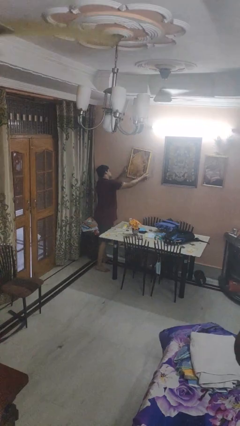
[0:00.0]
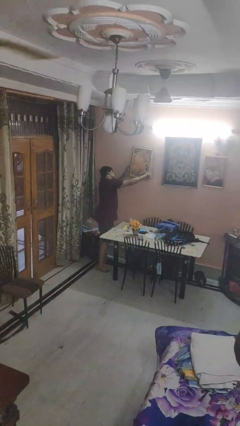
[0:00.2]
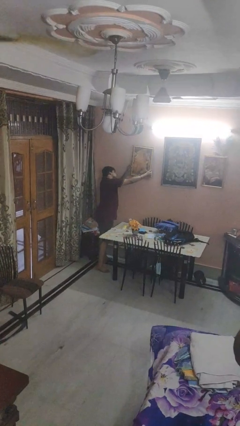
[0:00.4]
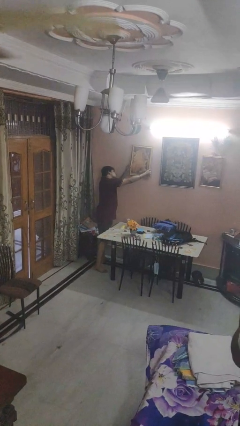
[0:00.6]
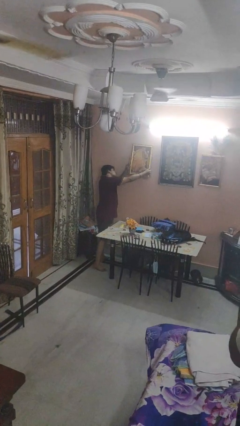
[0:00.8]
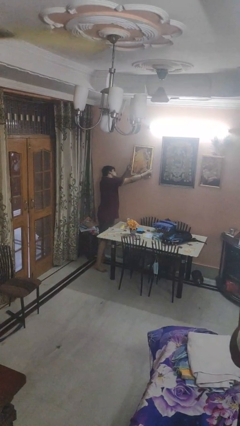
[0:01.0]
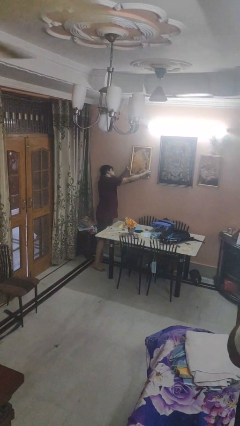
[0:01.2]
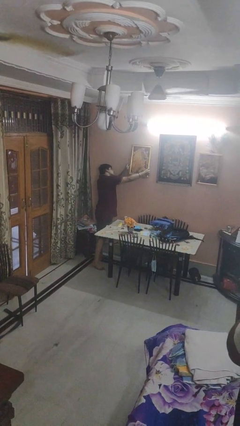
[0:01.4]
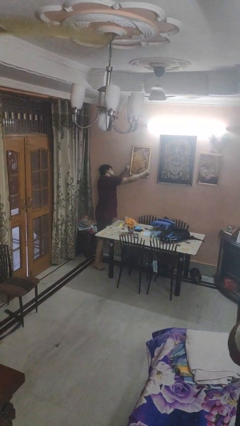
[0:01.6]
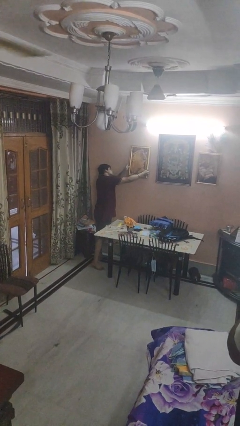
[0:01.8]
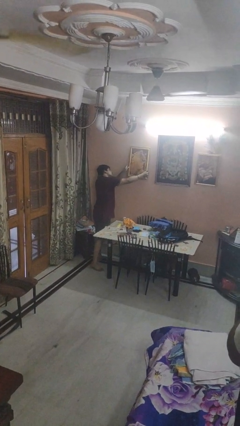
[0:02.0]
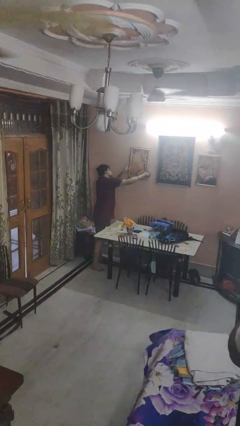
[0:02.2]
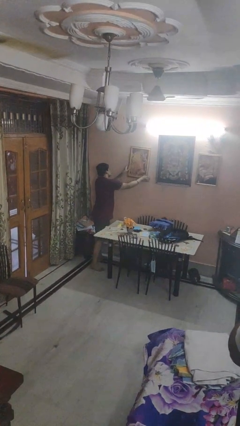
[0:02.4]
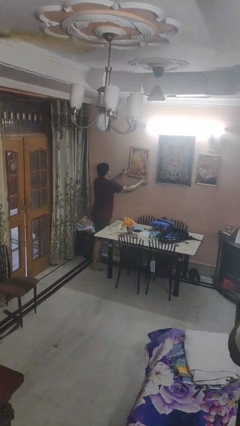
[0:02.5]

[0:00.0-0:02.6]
person puts up picture frame

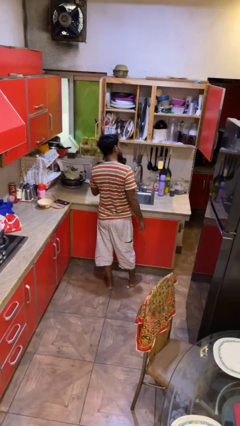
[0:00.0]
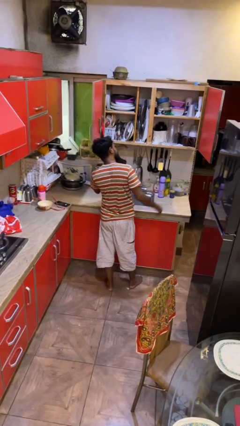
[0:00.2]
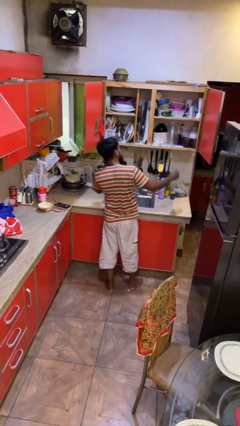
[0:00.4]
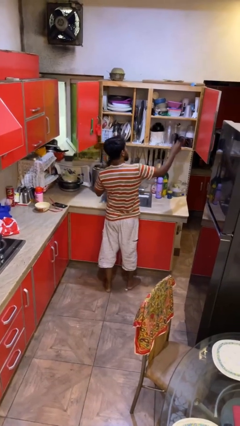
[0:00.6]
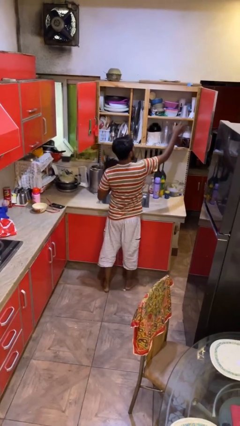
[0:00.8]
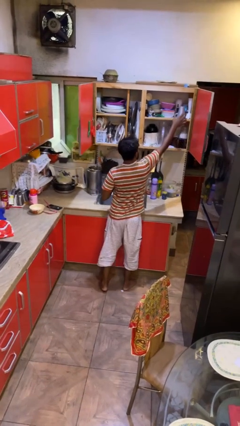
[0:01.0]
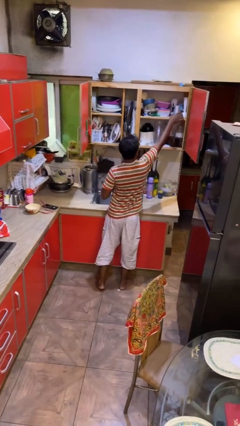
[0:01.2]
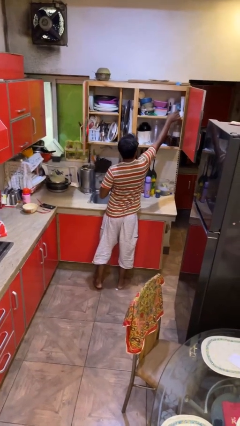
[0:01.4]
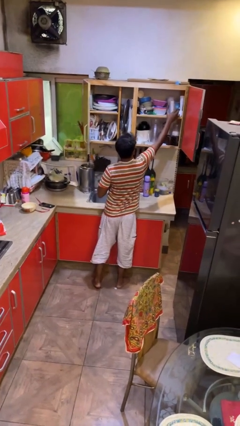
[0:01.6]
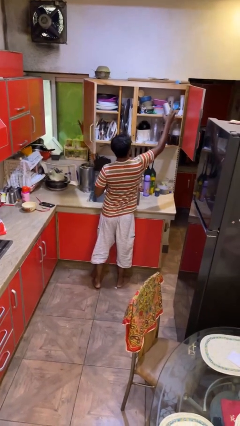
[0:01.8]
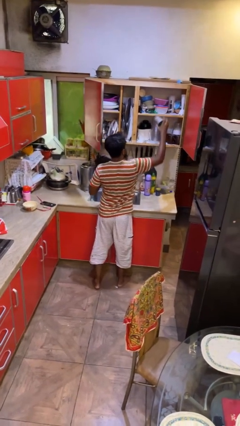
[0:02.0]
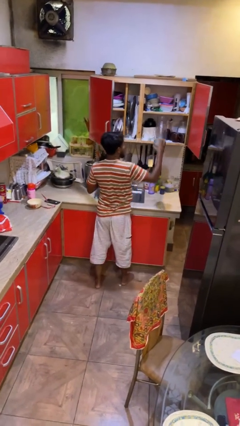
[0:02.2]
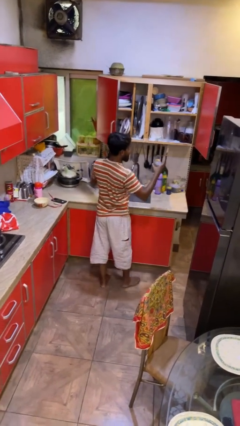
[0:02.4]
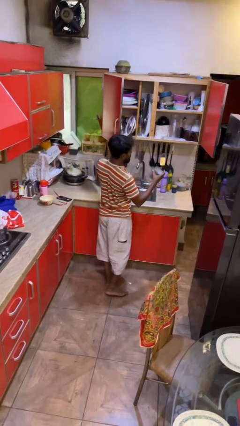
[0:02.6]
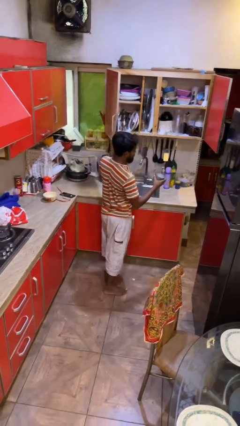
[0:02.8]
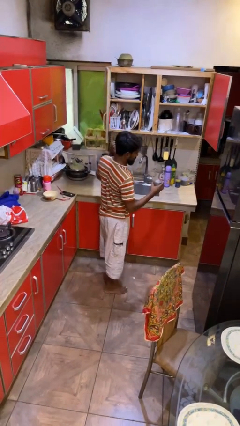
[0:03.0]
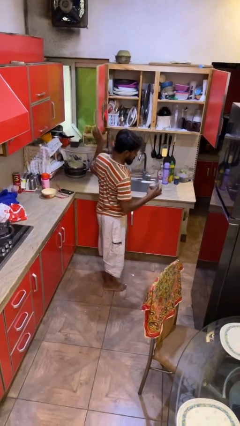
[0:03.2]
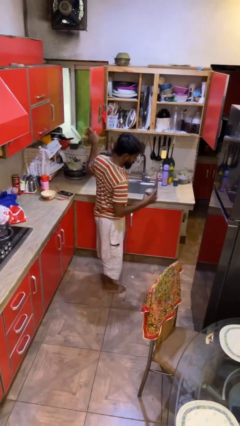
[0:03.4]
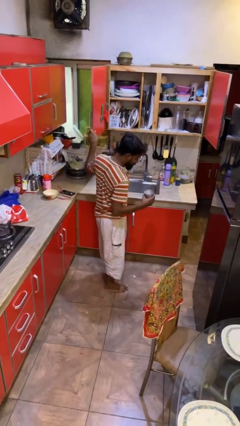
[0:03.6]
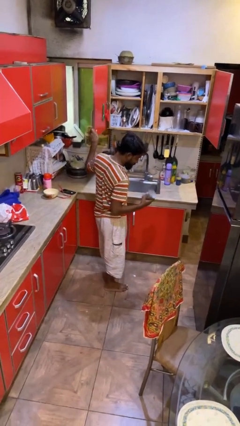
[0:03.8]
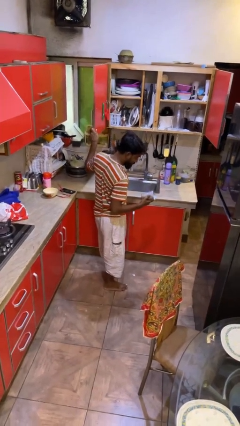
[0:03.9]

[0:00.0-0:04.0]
person picks up object from cabinet

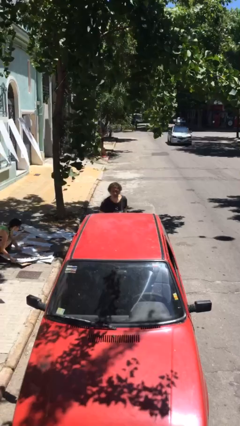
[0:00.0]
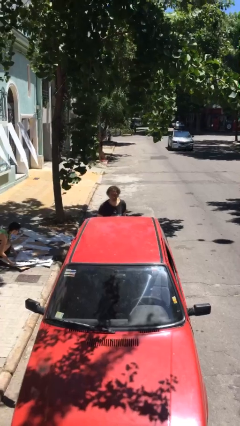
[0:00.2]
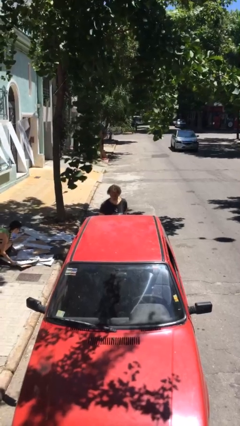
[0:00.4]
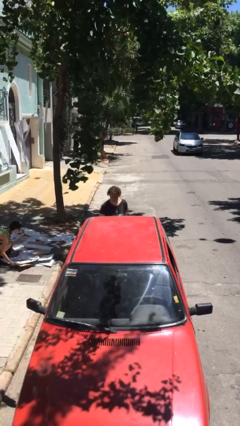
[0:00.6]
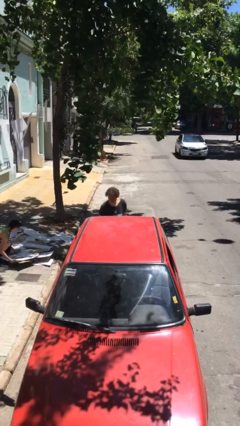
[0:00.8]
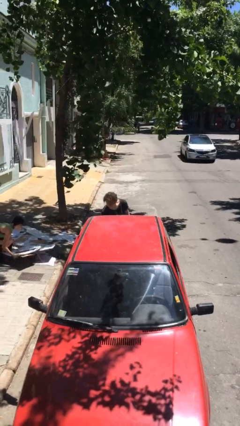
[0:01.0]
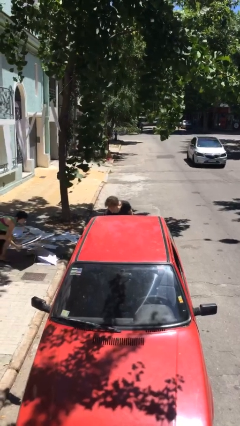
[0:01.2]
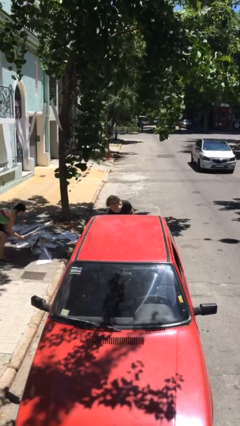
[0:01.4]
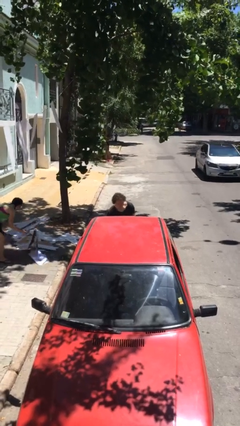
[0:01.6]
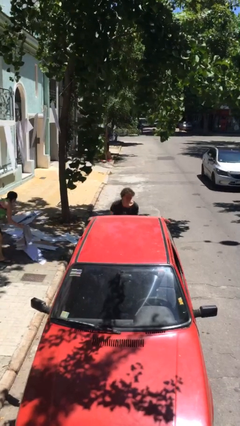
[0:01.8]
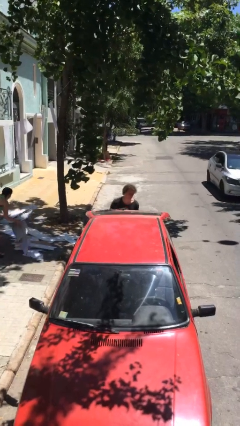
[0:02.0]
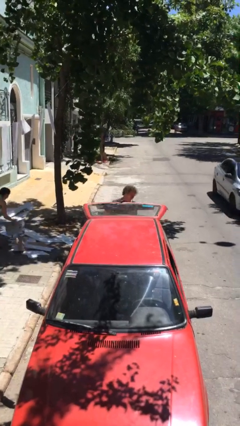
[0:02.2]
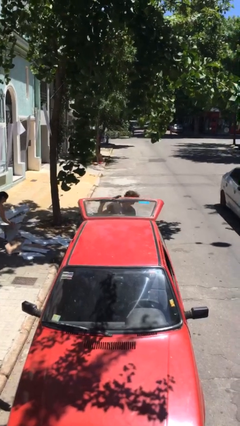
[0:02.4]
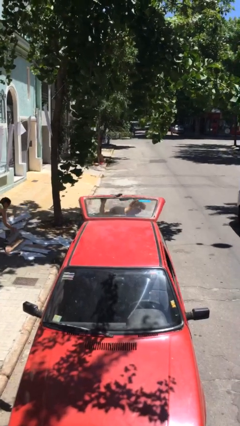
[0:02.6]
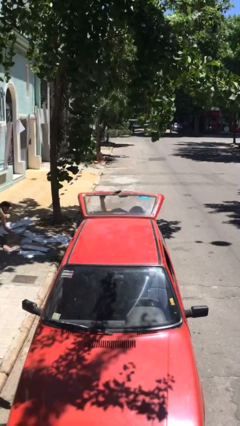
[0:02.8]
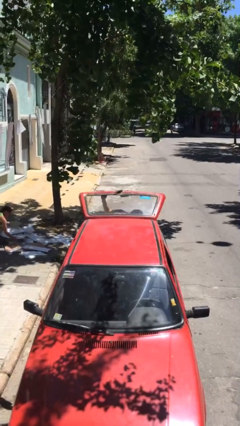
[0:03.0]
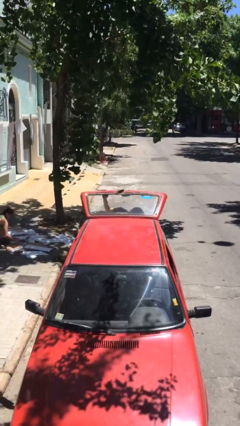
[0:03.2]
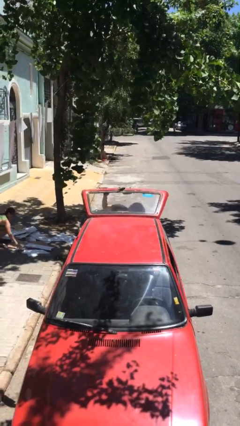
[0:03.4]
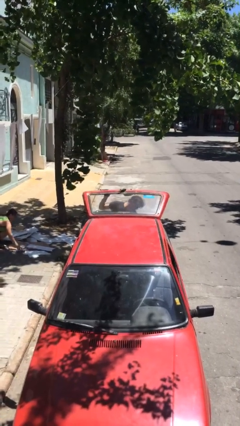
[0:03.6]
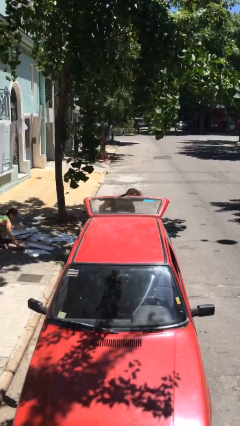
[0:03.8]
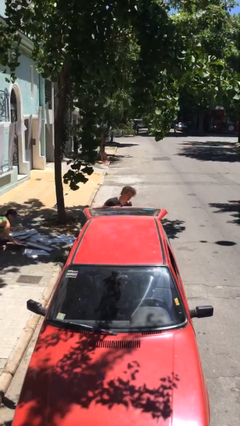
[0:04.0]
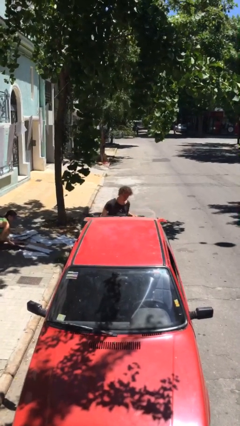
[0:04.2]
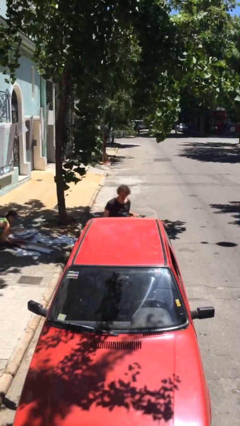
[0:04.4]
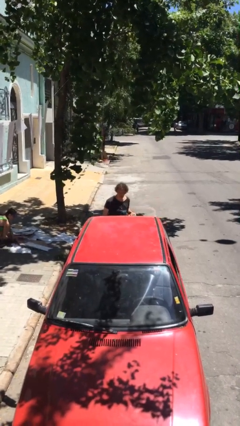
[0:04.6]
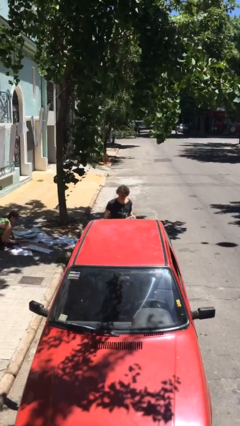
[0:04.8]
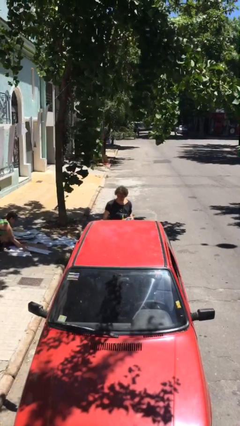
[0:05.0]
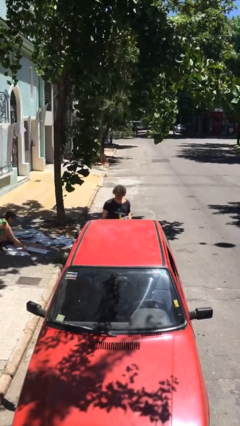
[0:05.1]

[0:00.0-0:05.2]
person unloads car

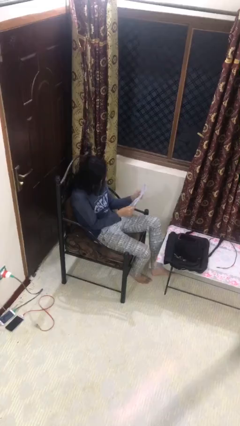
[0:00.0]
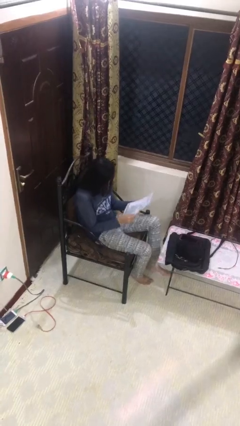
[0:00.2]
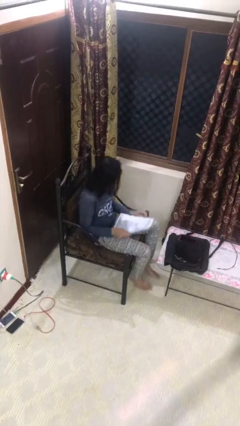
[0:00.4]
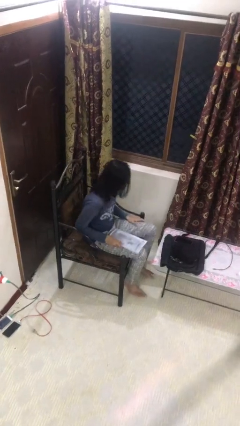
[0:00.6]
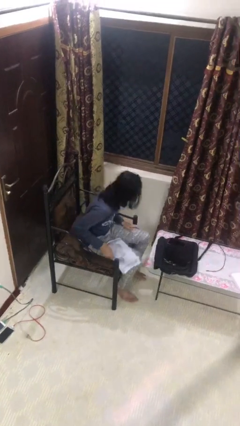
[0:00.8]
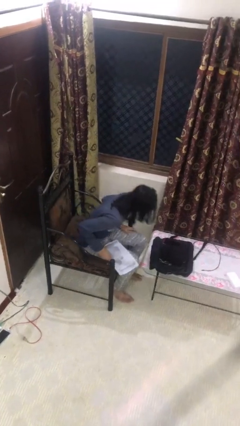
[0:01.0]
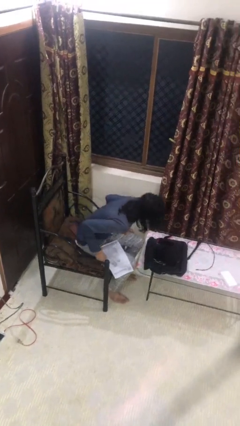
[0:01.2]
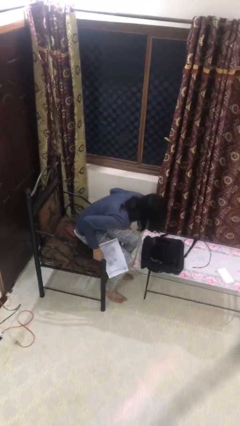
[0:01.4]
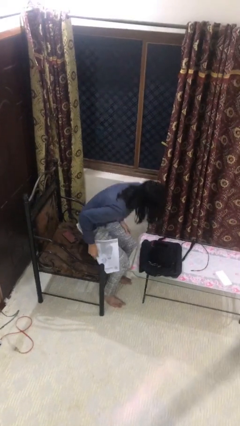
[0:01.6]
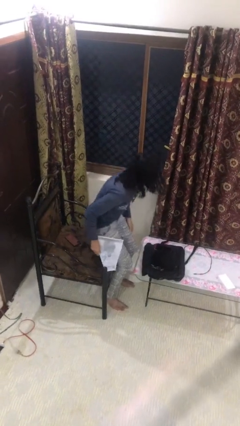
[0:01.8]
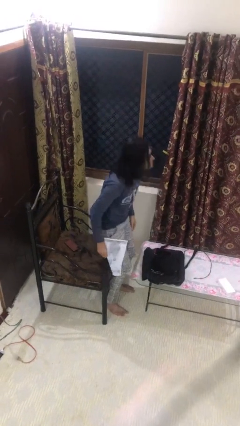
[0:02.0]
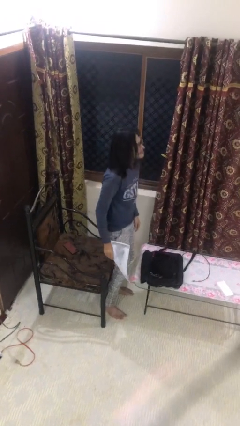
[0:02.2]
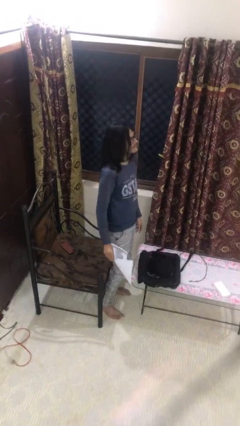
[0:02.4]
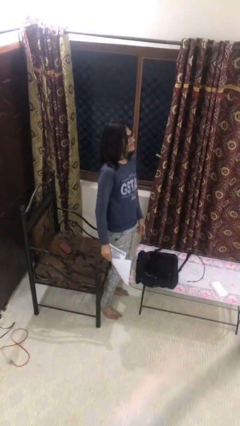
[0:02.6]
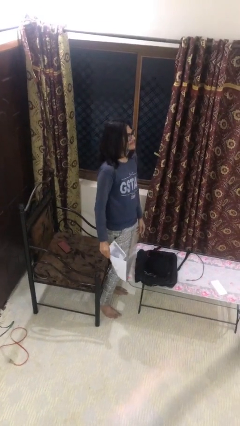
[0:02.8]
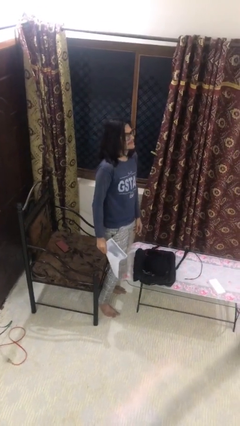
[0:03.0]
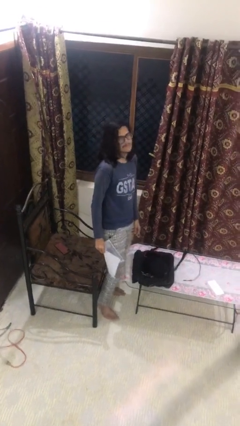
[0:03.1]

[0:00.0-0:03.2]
person stands up

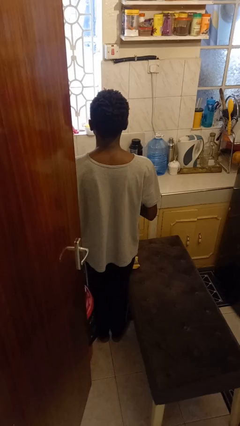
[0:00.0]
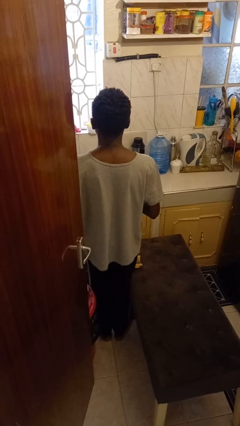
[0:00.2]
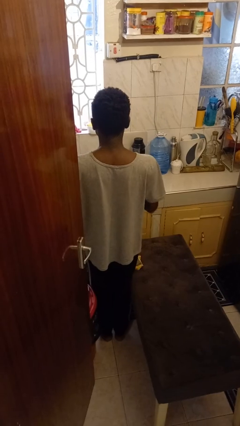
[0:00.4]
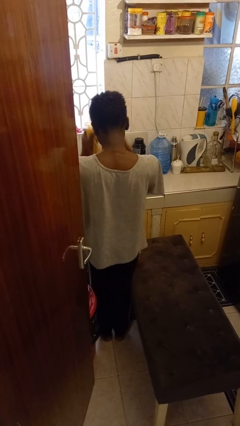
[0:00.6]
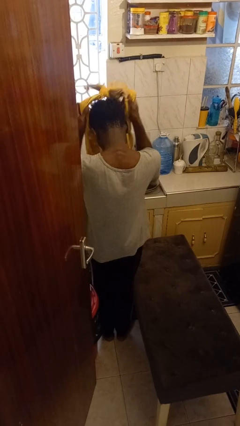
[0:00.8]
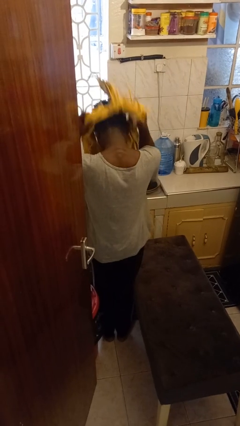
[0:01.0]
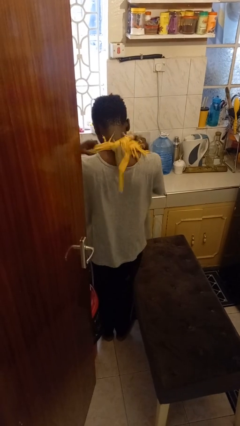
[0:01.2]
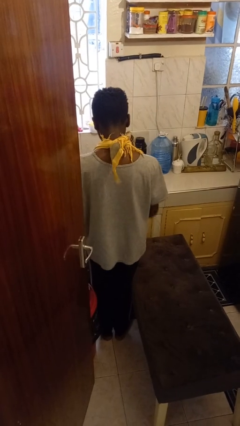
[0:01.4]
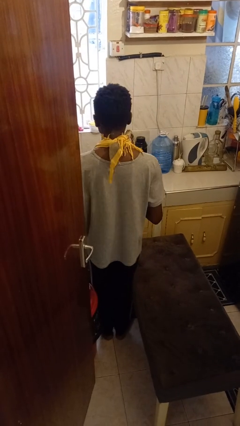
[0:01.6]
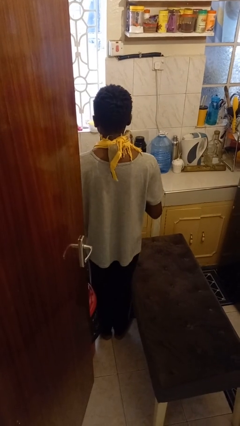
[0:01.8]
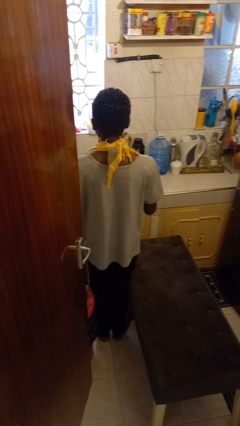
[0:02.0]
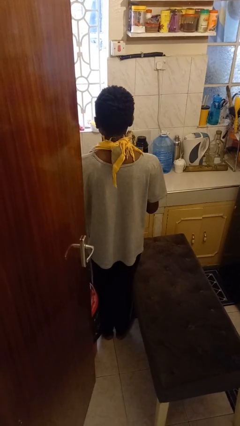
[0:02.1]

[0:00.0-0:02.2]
person puts on apron

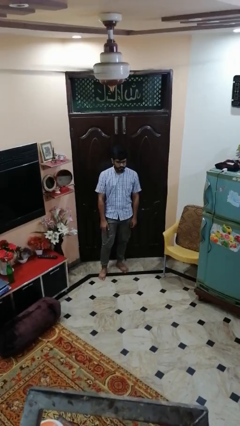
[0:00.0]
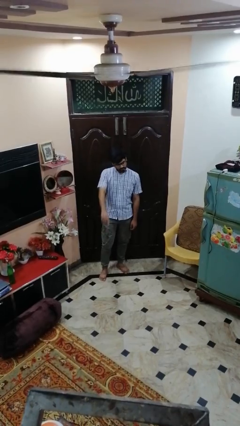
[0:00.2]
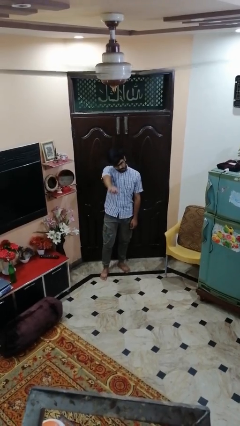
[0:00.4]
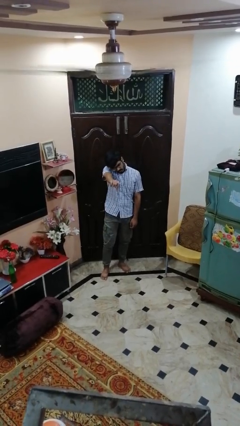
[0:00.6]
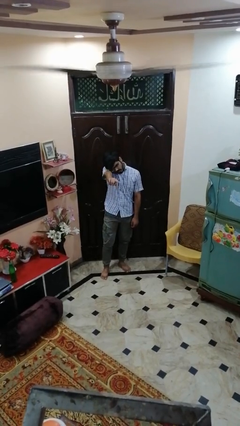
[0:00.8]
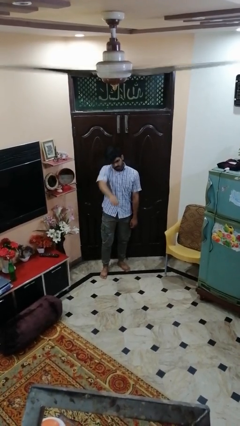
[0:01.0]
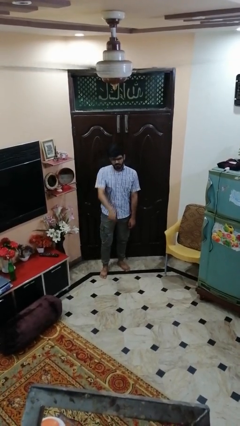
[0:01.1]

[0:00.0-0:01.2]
person points at person
